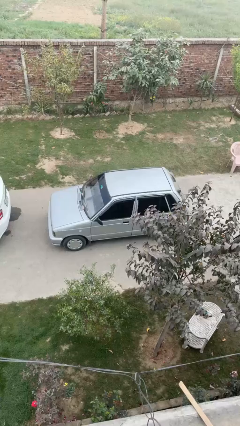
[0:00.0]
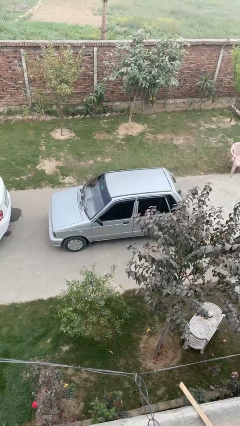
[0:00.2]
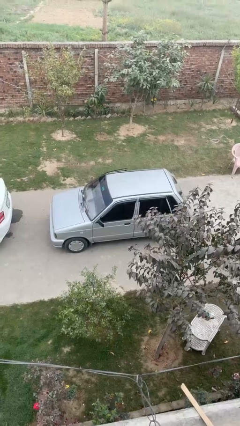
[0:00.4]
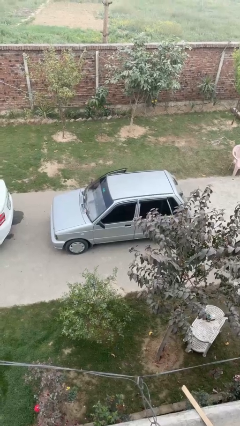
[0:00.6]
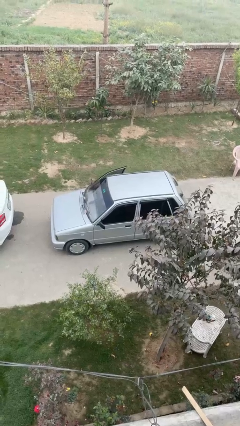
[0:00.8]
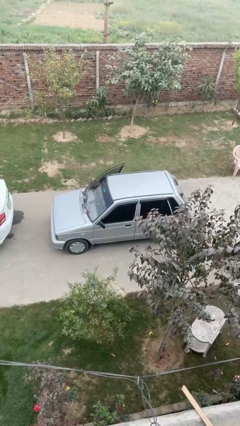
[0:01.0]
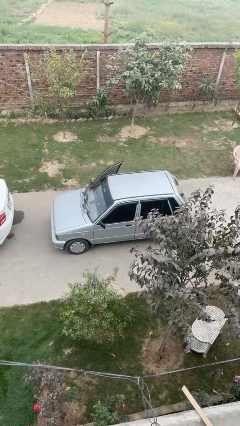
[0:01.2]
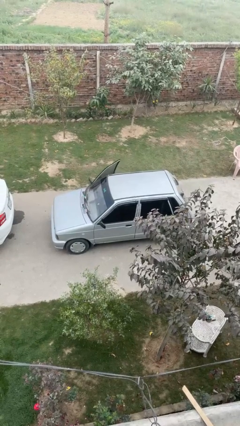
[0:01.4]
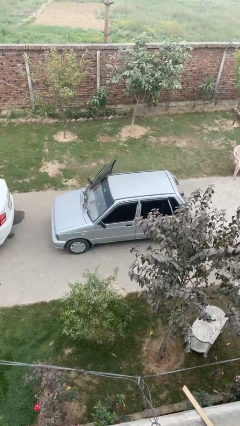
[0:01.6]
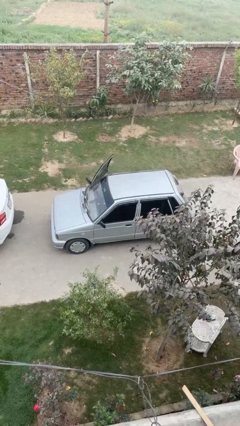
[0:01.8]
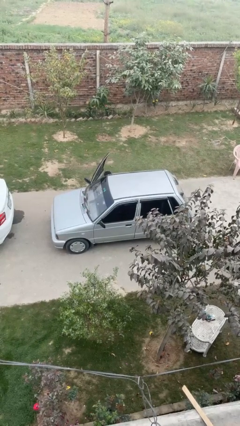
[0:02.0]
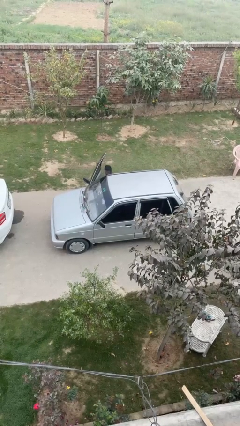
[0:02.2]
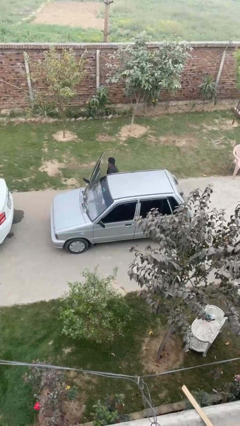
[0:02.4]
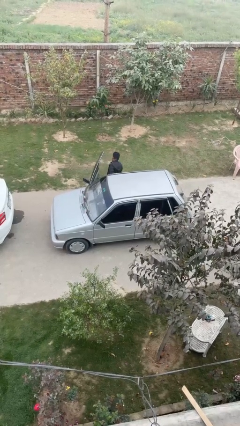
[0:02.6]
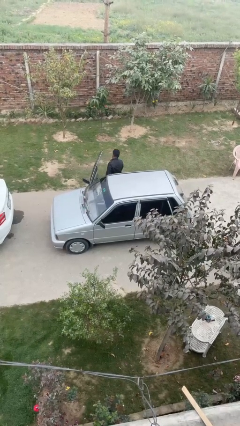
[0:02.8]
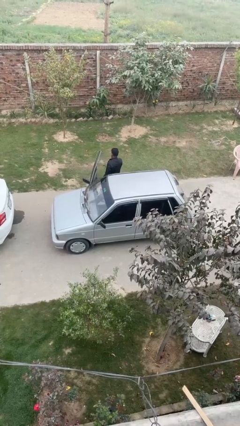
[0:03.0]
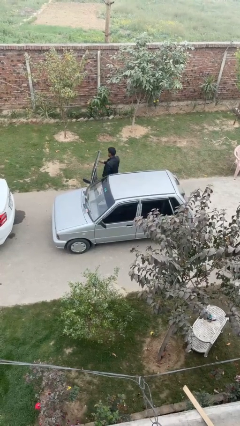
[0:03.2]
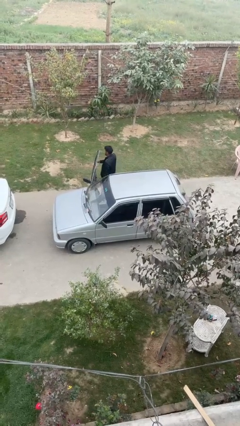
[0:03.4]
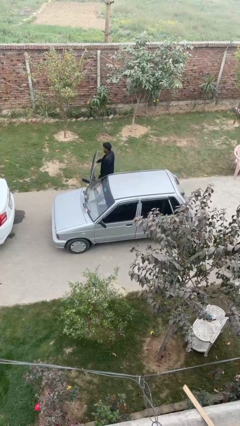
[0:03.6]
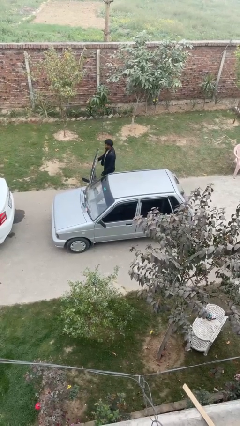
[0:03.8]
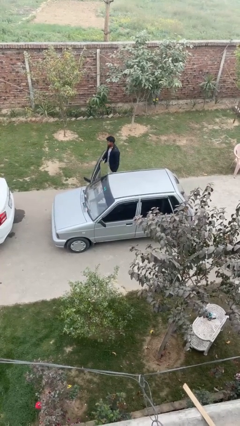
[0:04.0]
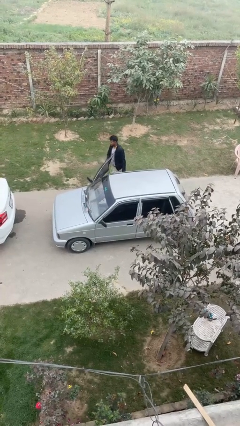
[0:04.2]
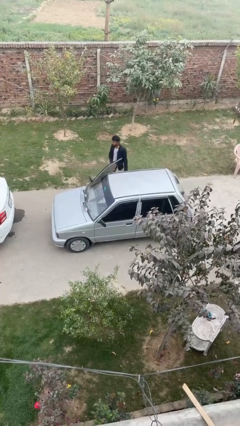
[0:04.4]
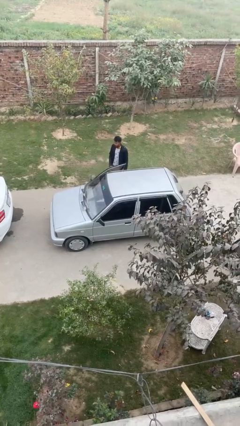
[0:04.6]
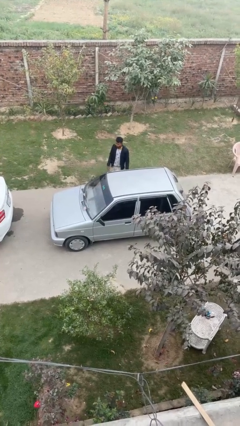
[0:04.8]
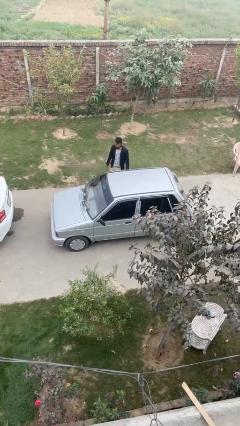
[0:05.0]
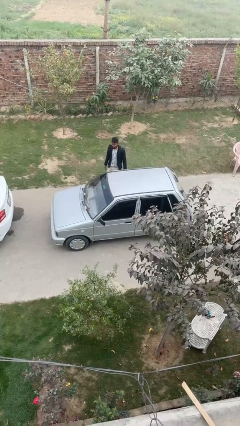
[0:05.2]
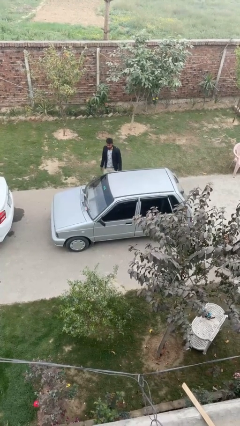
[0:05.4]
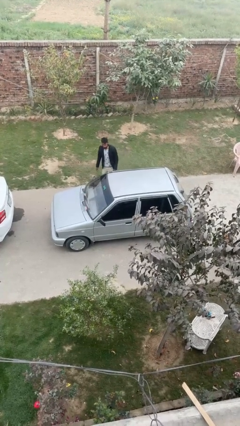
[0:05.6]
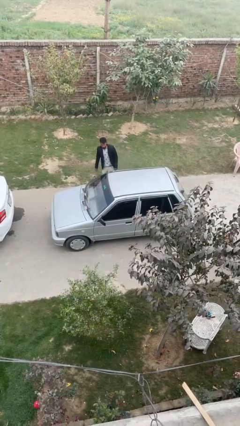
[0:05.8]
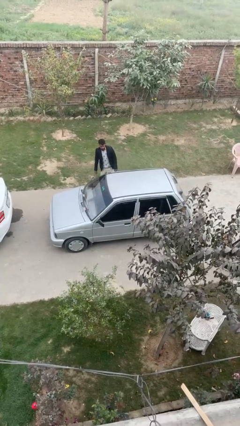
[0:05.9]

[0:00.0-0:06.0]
car drops off person

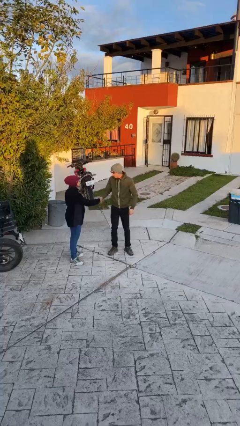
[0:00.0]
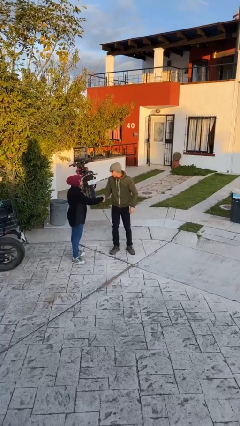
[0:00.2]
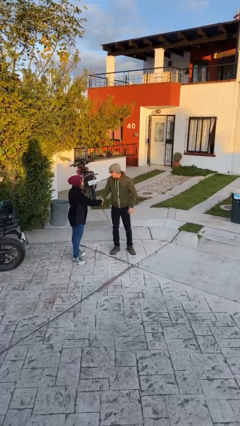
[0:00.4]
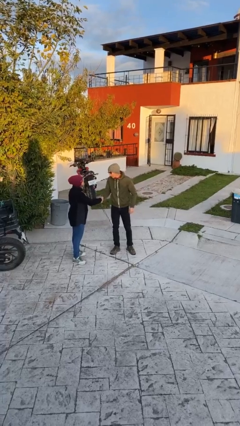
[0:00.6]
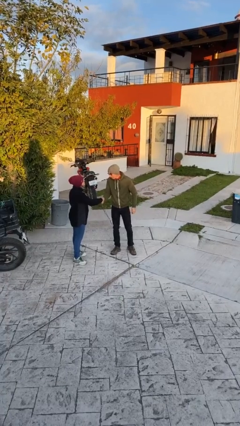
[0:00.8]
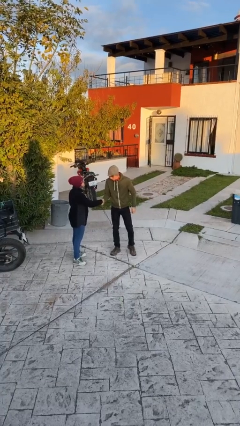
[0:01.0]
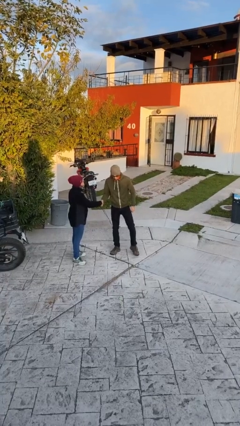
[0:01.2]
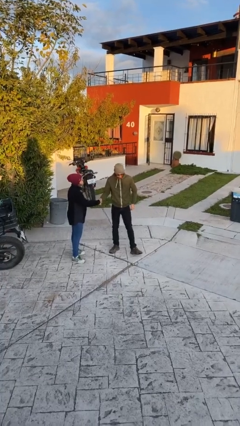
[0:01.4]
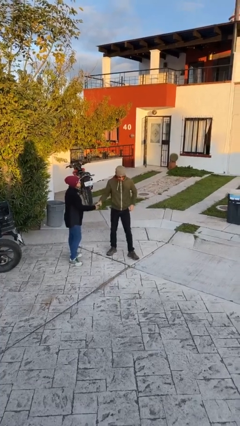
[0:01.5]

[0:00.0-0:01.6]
person shakes hand

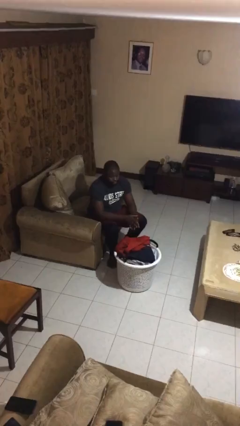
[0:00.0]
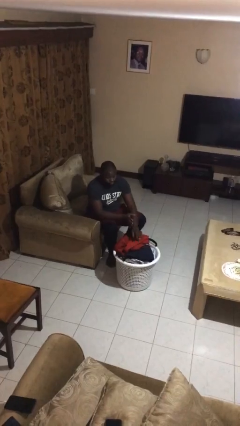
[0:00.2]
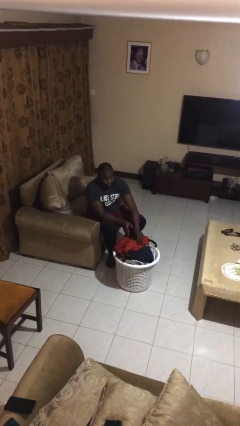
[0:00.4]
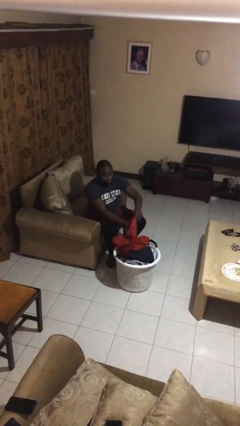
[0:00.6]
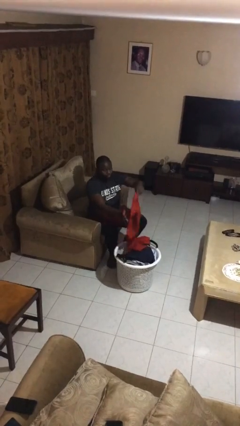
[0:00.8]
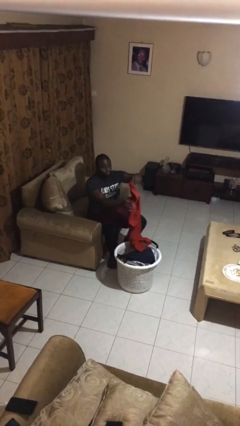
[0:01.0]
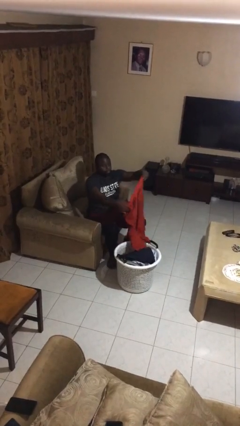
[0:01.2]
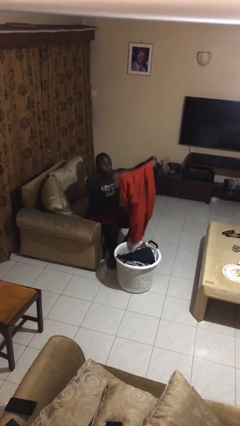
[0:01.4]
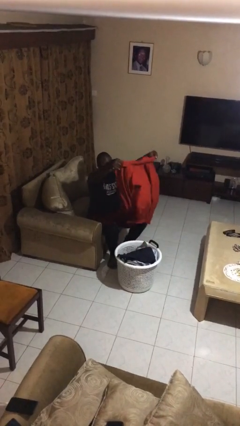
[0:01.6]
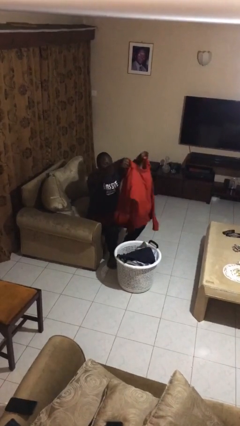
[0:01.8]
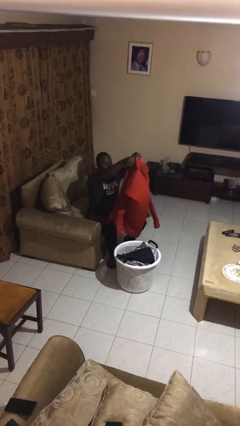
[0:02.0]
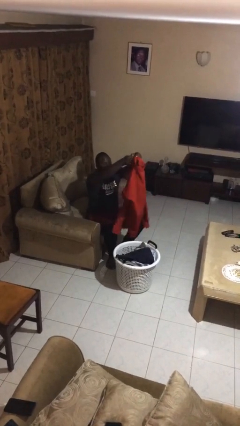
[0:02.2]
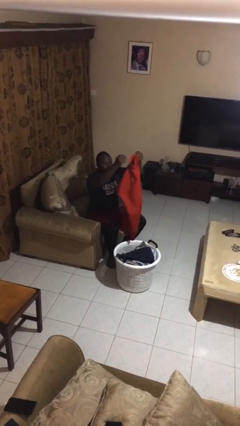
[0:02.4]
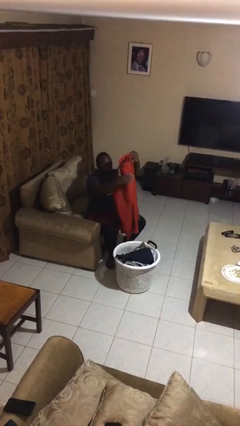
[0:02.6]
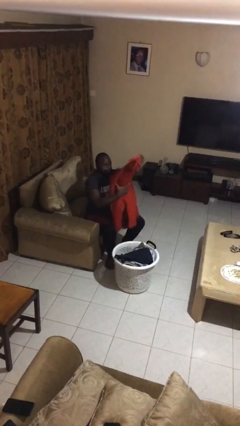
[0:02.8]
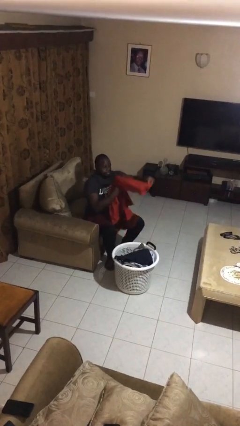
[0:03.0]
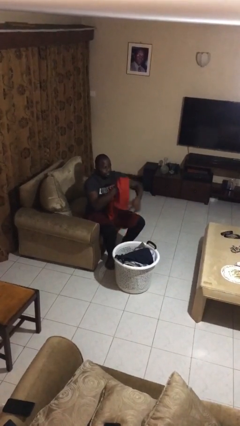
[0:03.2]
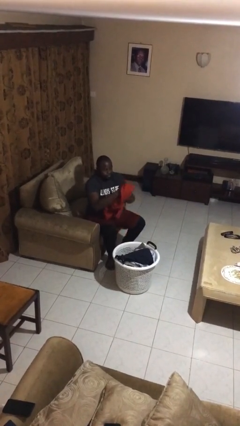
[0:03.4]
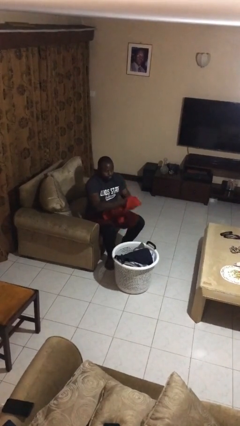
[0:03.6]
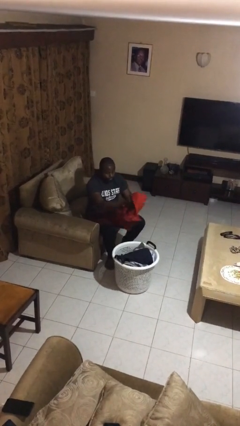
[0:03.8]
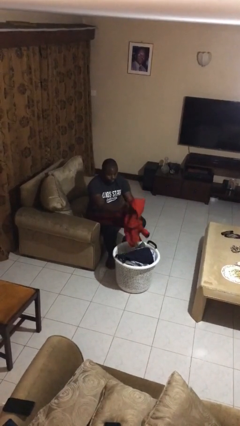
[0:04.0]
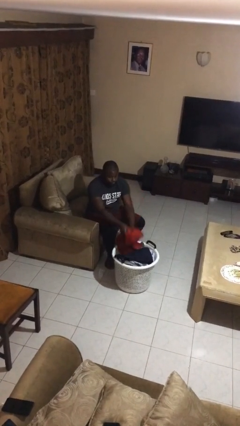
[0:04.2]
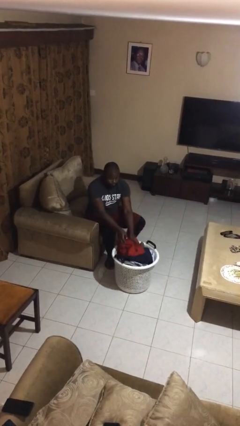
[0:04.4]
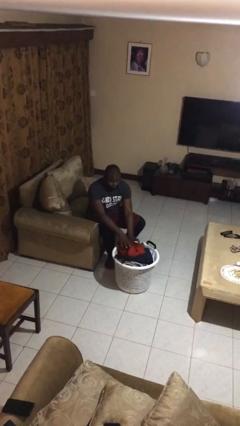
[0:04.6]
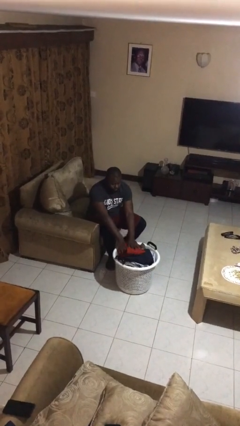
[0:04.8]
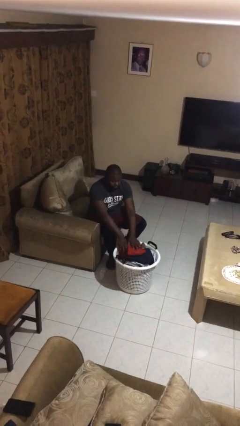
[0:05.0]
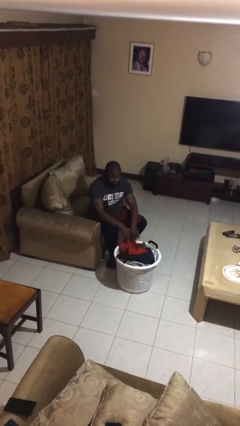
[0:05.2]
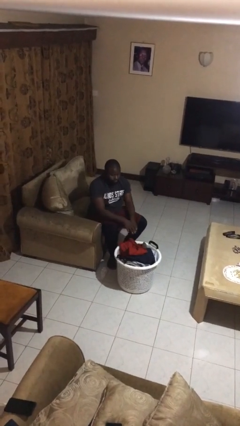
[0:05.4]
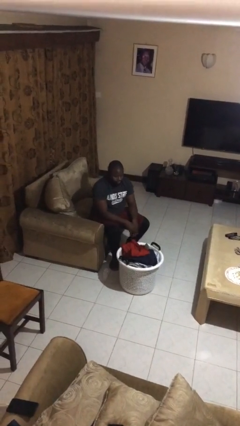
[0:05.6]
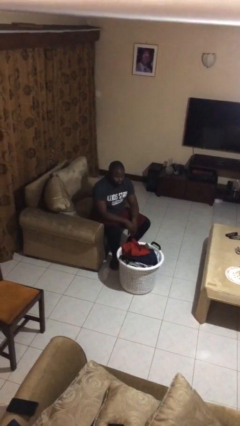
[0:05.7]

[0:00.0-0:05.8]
person folds shirt

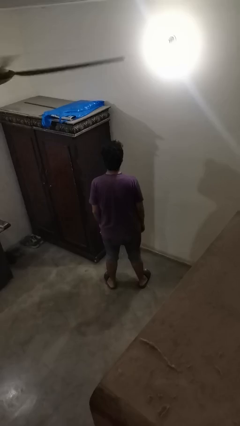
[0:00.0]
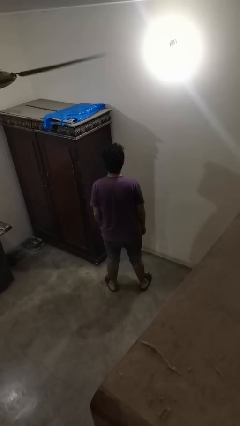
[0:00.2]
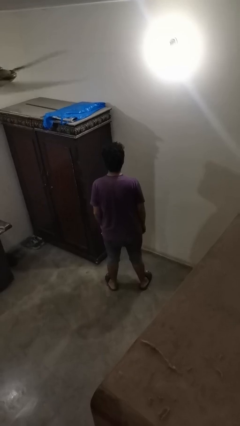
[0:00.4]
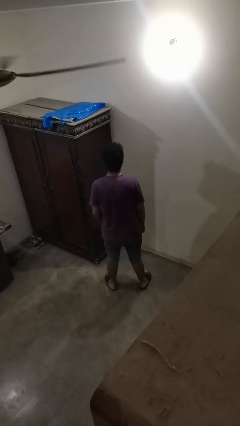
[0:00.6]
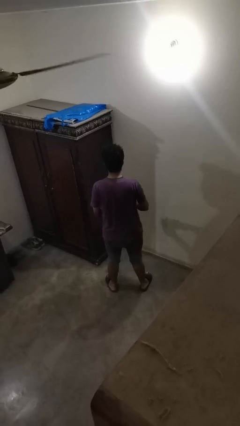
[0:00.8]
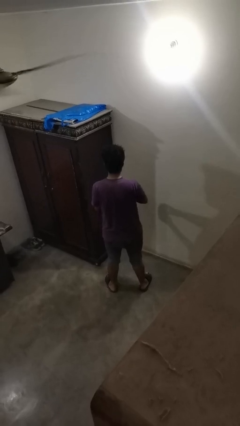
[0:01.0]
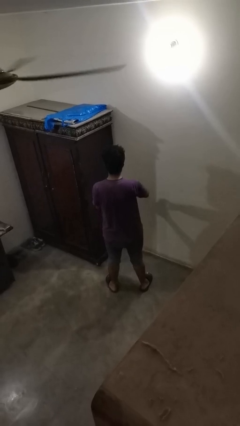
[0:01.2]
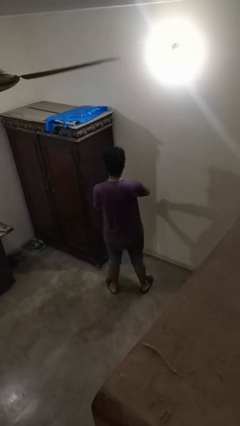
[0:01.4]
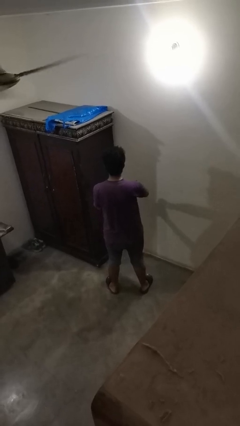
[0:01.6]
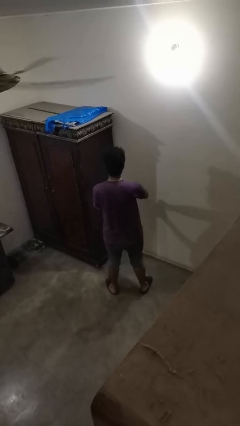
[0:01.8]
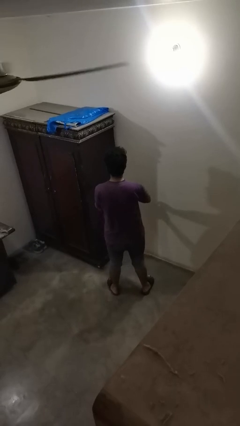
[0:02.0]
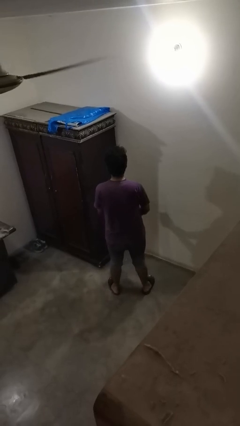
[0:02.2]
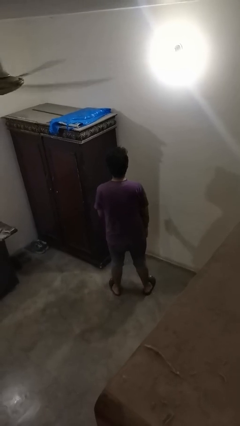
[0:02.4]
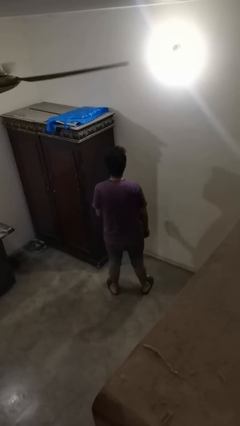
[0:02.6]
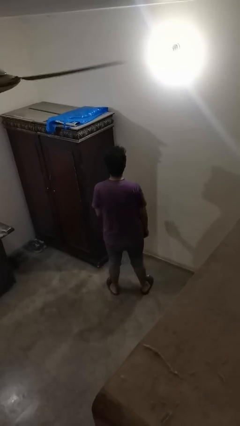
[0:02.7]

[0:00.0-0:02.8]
person opens beverage can

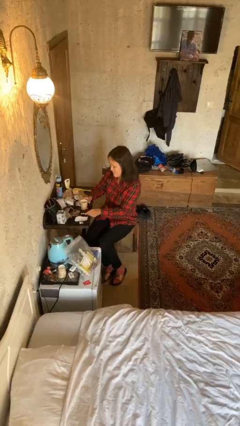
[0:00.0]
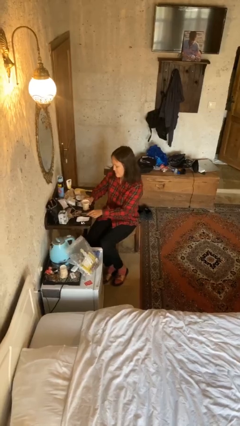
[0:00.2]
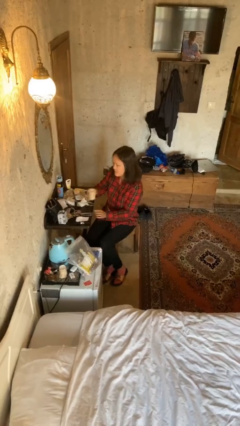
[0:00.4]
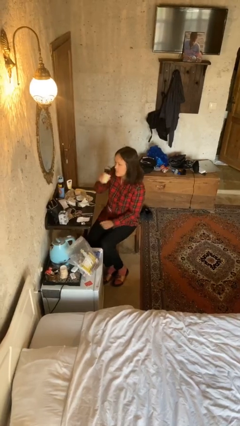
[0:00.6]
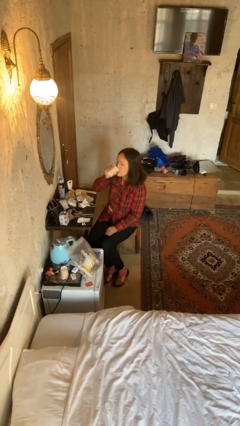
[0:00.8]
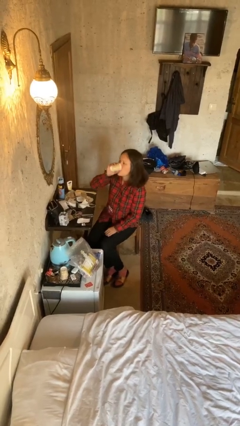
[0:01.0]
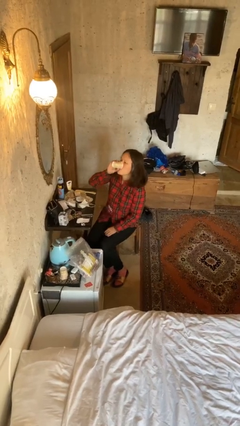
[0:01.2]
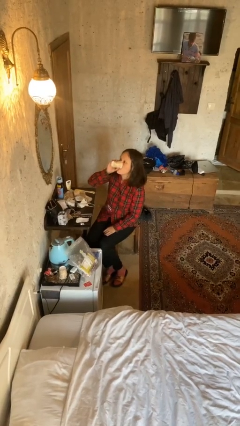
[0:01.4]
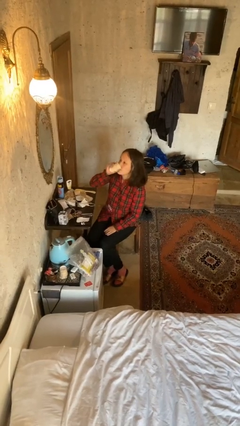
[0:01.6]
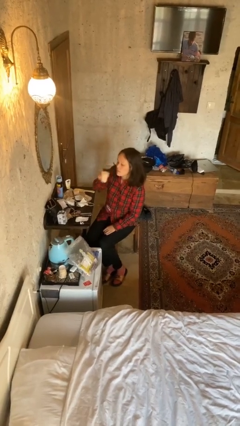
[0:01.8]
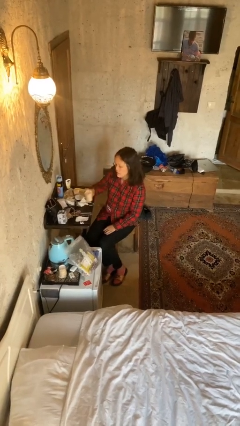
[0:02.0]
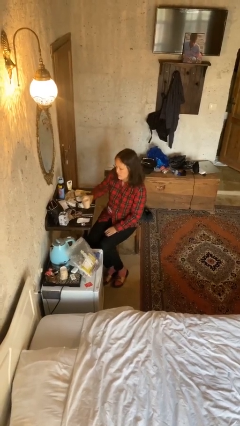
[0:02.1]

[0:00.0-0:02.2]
person drinks from cup
